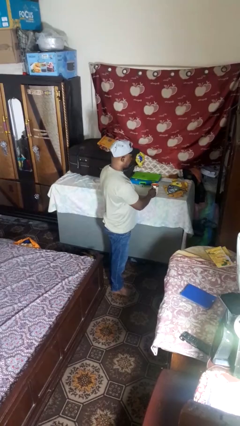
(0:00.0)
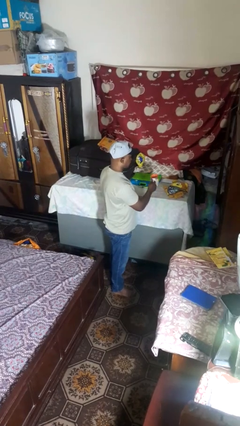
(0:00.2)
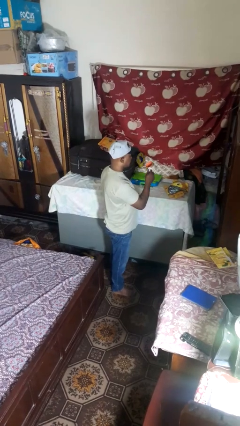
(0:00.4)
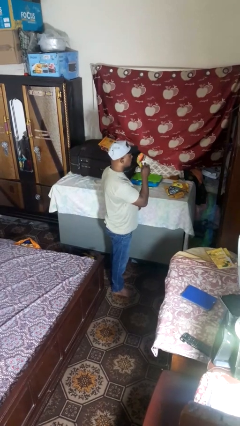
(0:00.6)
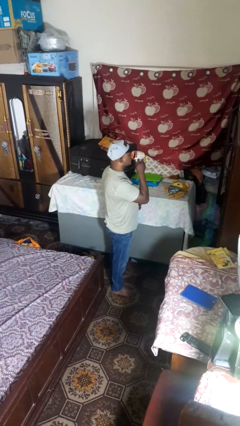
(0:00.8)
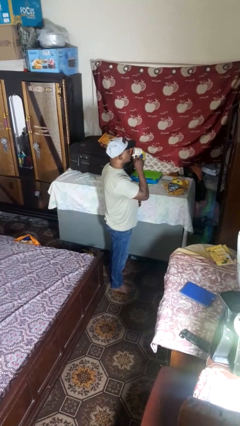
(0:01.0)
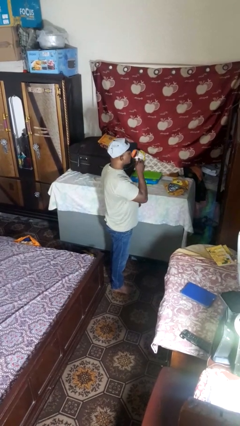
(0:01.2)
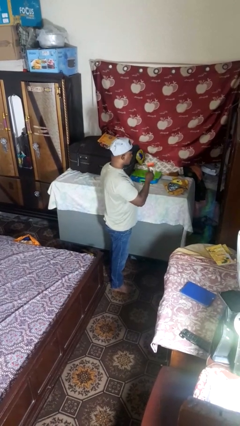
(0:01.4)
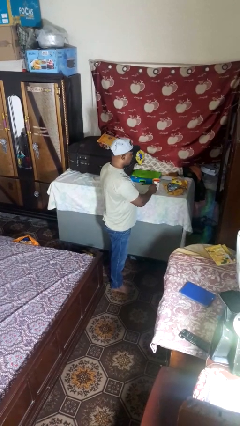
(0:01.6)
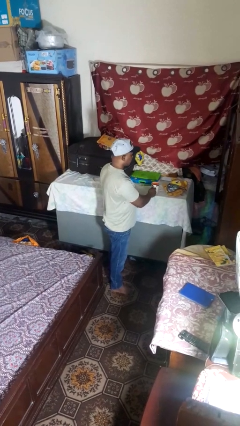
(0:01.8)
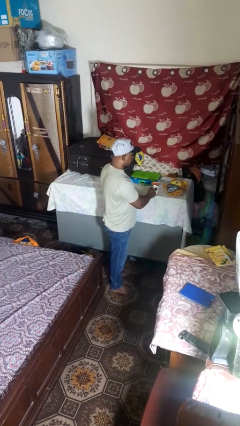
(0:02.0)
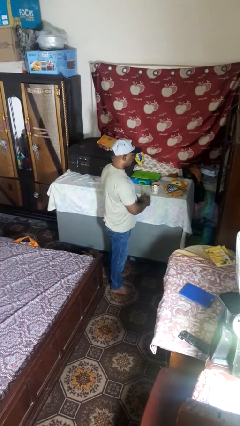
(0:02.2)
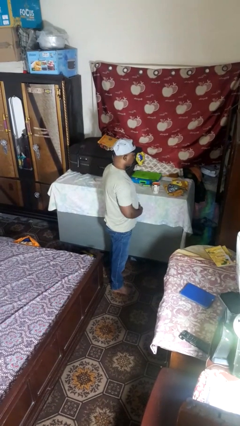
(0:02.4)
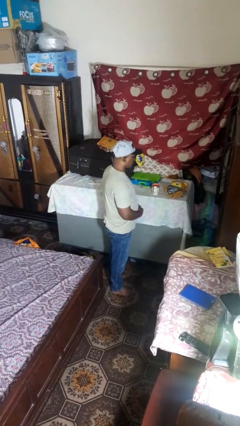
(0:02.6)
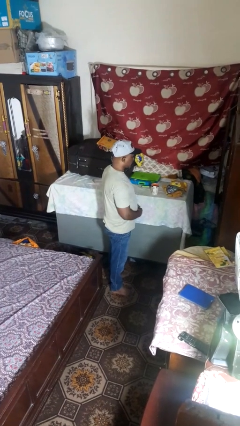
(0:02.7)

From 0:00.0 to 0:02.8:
person drinks from cup

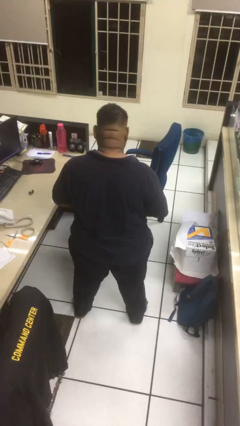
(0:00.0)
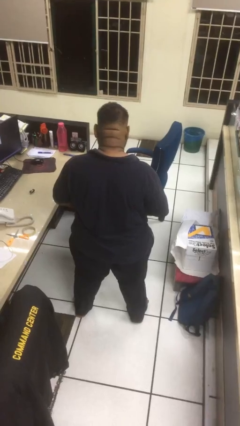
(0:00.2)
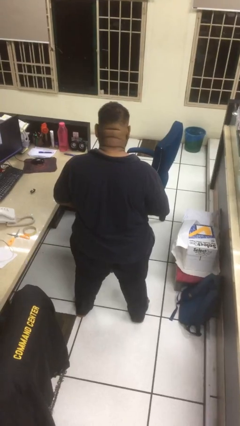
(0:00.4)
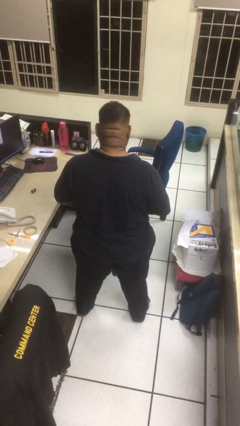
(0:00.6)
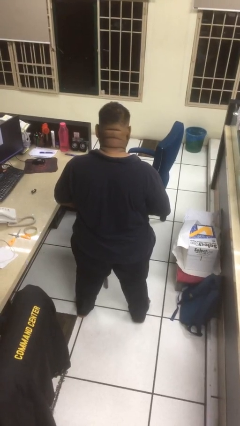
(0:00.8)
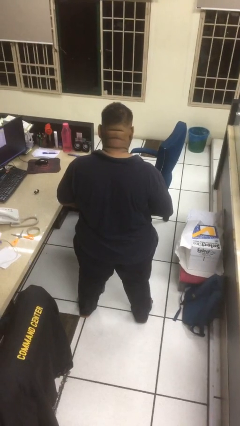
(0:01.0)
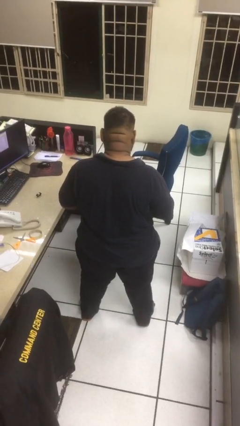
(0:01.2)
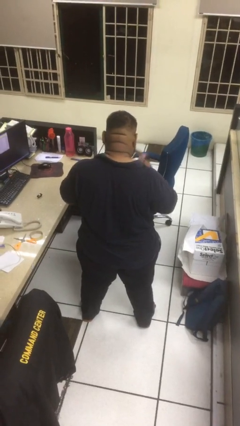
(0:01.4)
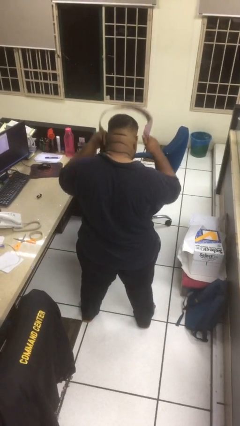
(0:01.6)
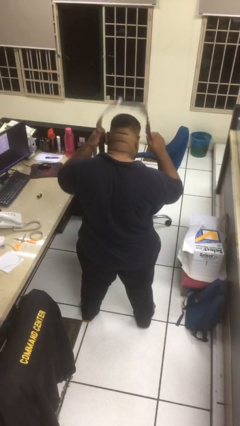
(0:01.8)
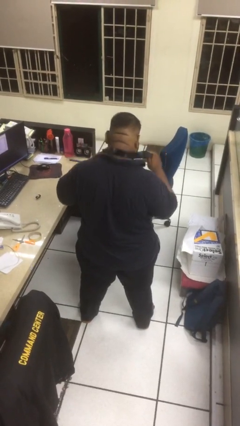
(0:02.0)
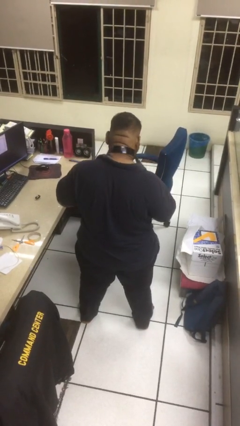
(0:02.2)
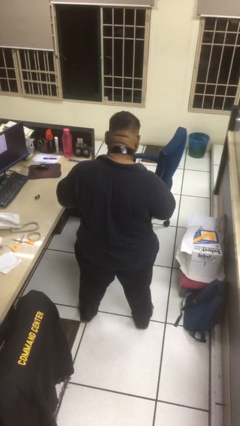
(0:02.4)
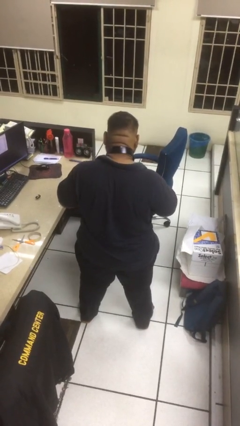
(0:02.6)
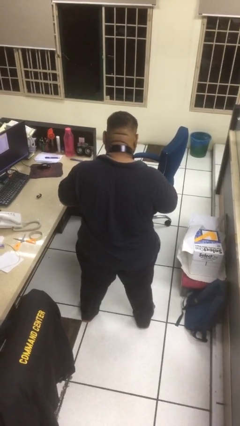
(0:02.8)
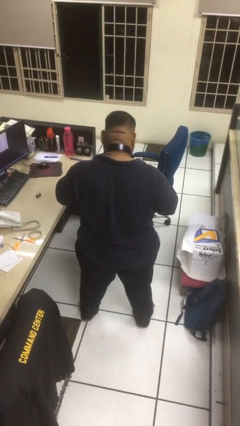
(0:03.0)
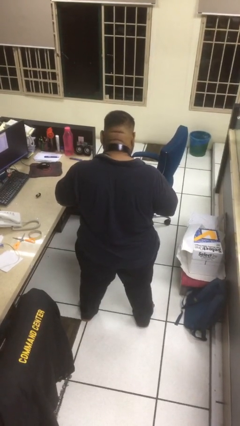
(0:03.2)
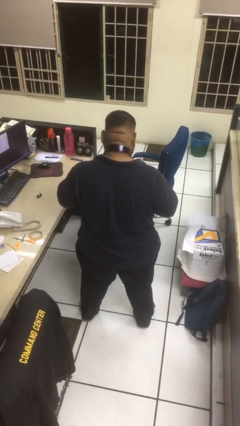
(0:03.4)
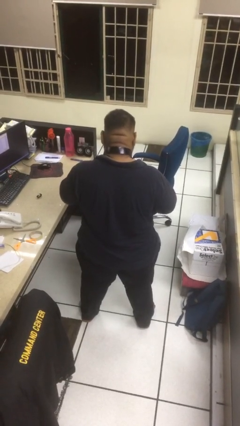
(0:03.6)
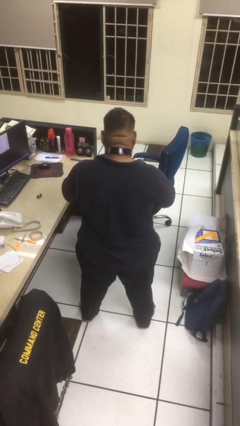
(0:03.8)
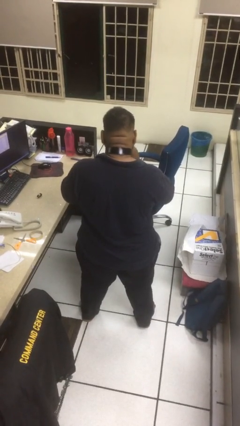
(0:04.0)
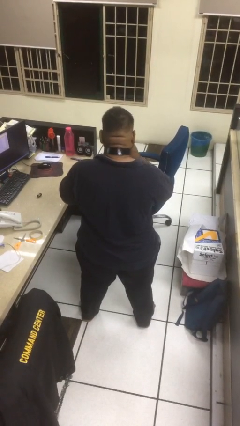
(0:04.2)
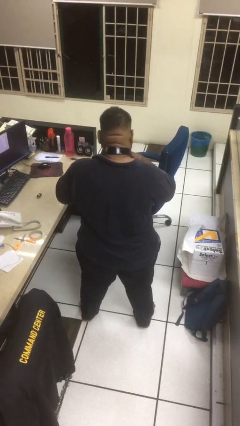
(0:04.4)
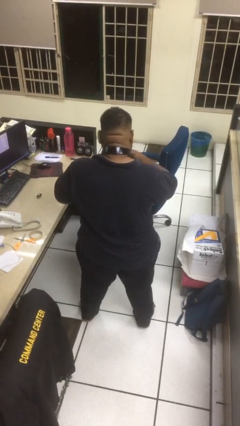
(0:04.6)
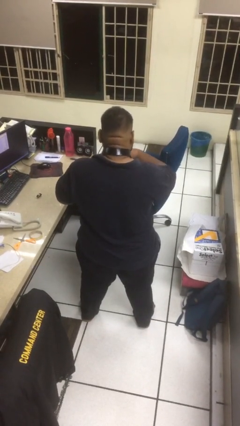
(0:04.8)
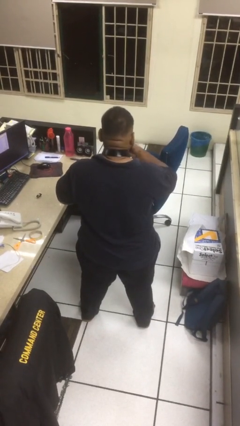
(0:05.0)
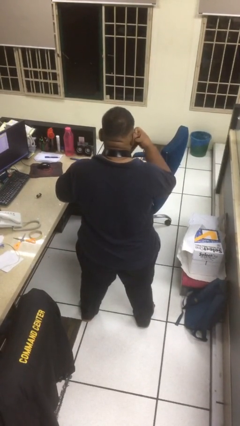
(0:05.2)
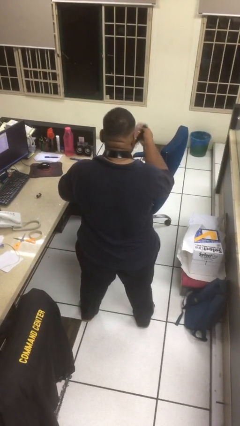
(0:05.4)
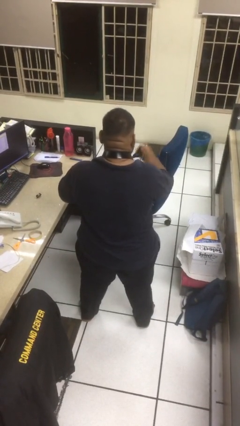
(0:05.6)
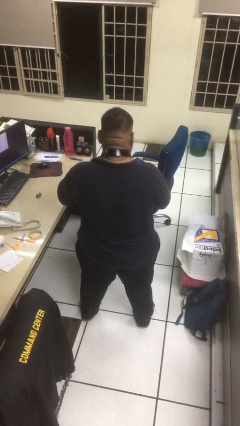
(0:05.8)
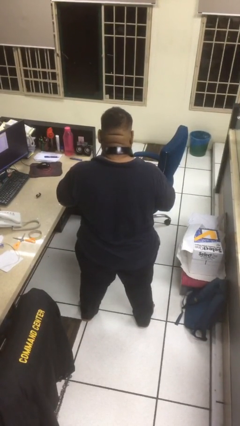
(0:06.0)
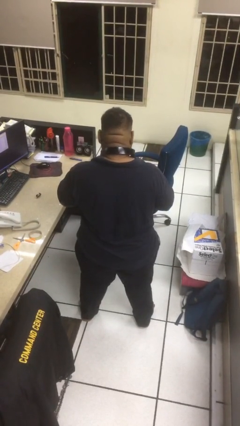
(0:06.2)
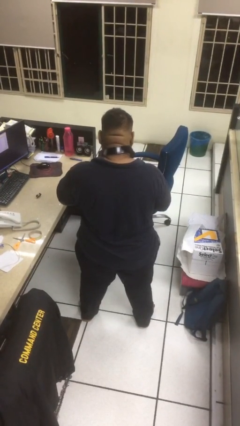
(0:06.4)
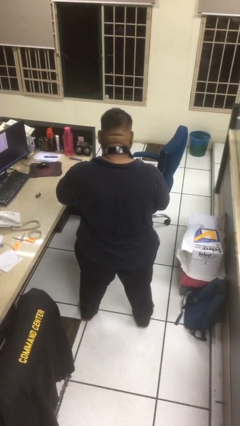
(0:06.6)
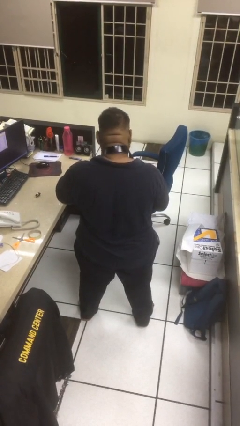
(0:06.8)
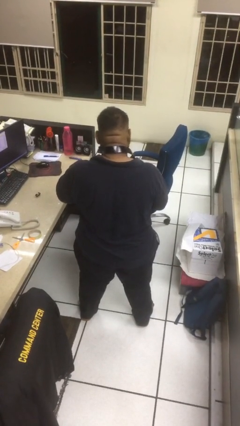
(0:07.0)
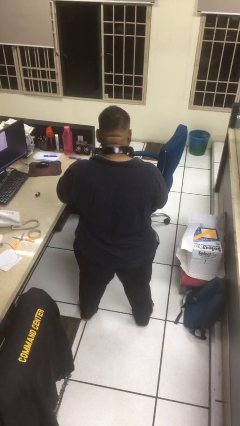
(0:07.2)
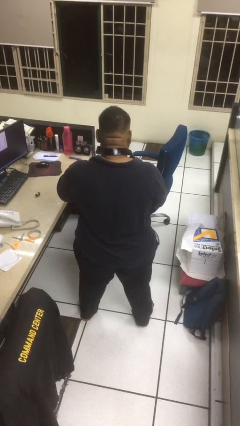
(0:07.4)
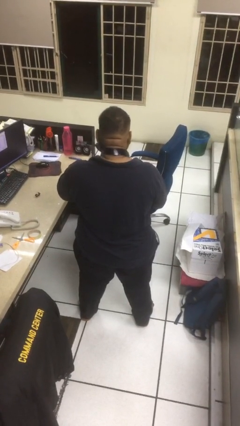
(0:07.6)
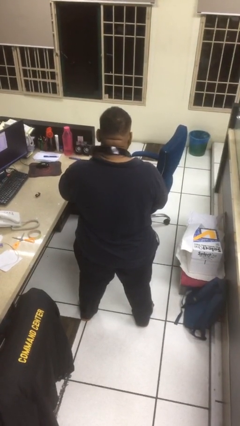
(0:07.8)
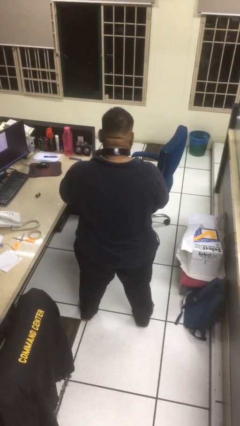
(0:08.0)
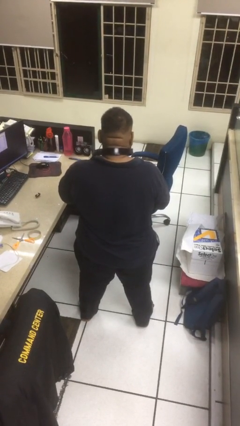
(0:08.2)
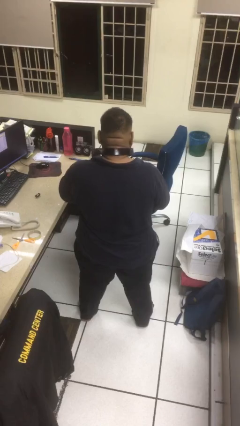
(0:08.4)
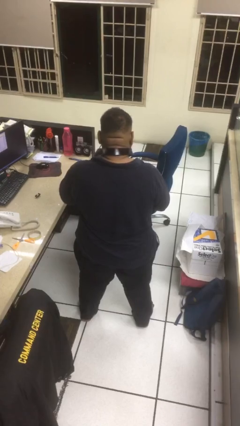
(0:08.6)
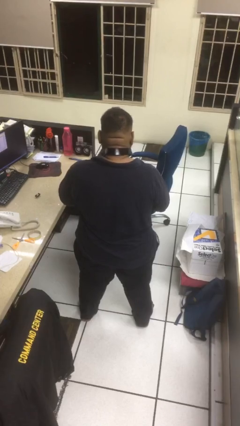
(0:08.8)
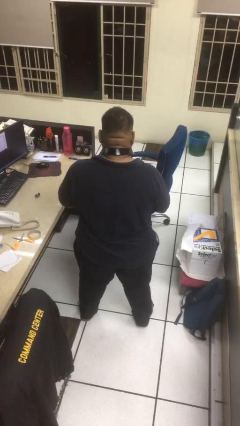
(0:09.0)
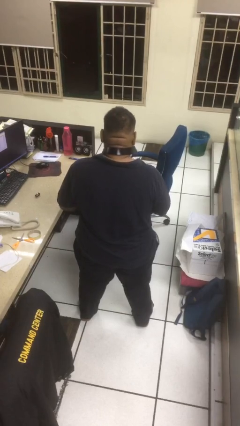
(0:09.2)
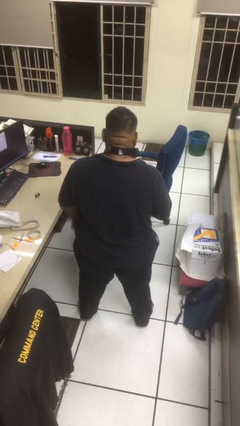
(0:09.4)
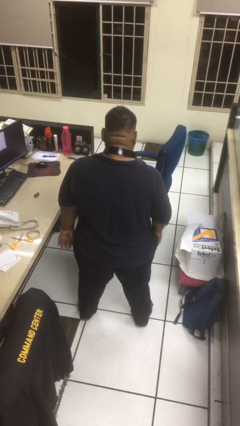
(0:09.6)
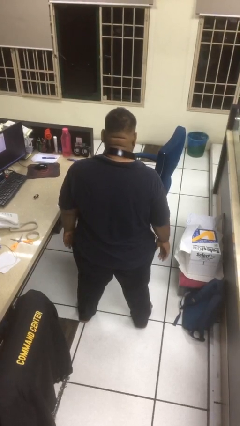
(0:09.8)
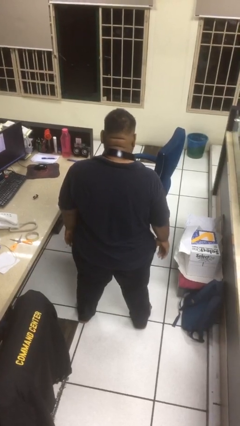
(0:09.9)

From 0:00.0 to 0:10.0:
person puts on necktie

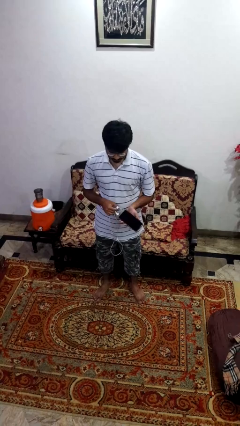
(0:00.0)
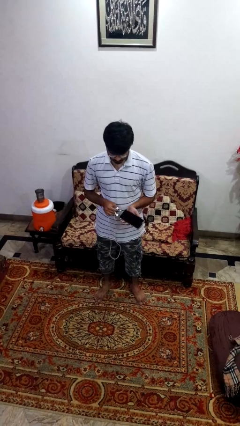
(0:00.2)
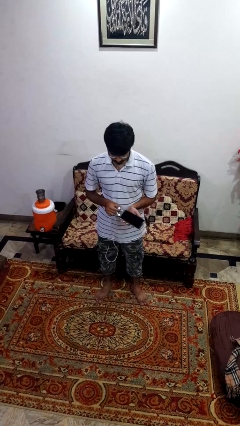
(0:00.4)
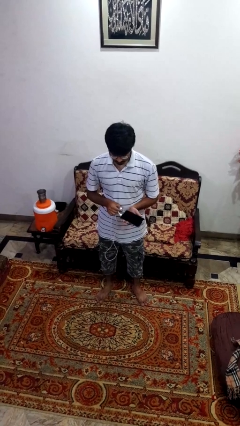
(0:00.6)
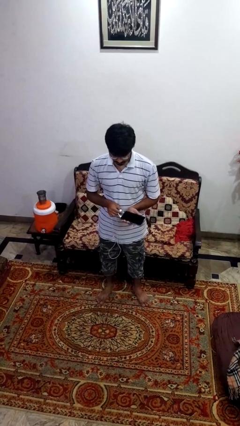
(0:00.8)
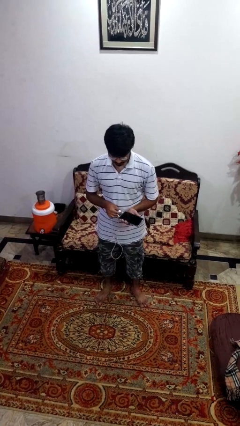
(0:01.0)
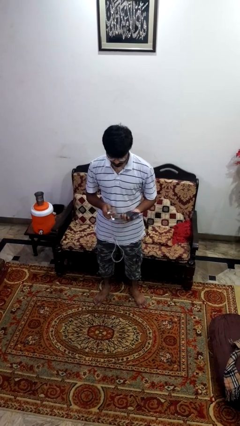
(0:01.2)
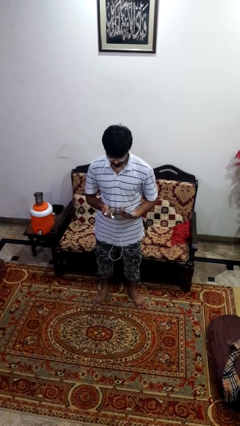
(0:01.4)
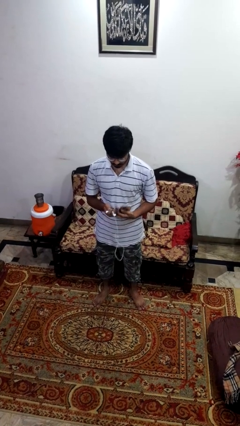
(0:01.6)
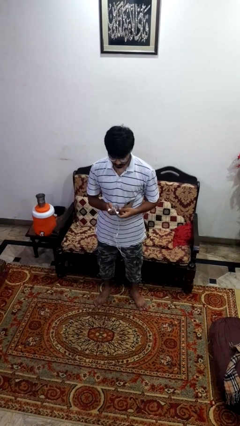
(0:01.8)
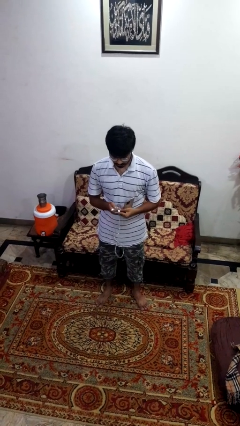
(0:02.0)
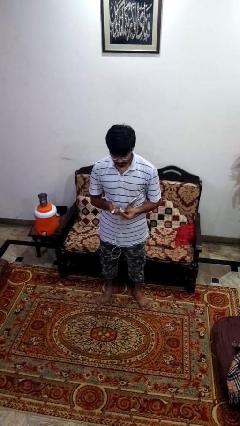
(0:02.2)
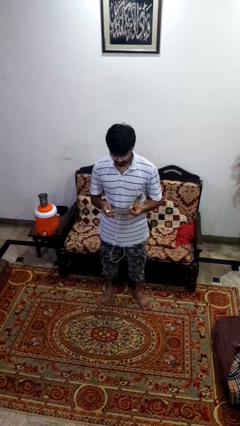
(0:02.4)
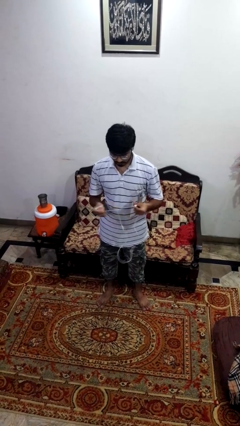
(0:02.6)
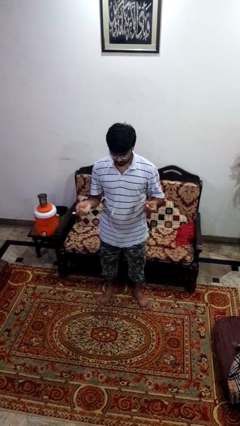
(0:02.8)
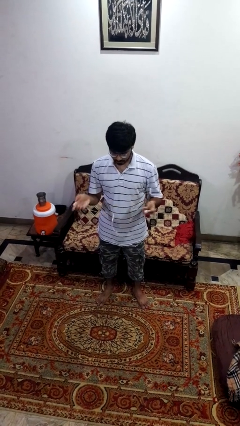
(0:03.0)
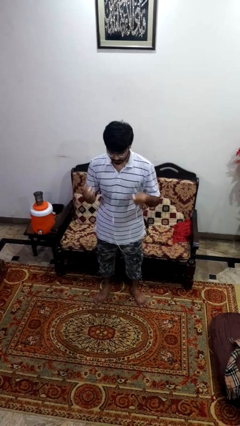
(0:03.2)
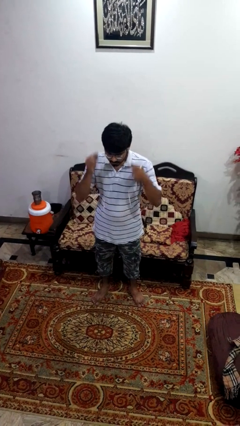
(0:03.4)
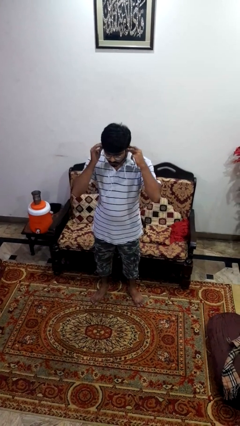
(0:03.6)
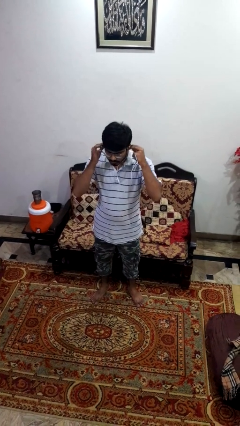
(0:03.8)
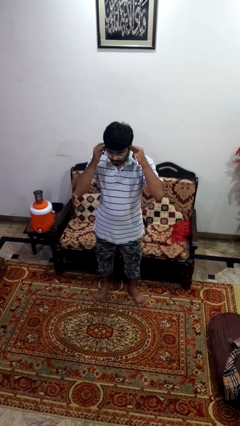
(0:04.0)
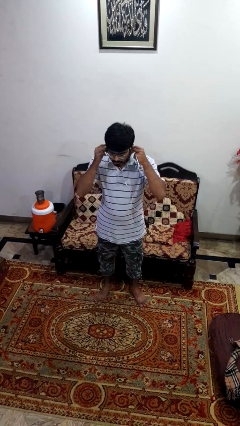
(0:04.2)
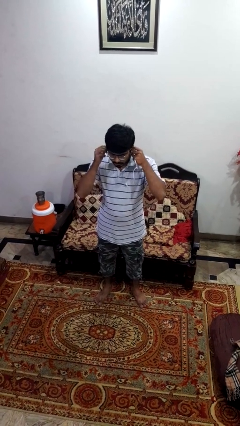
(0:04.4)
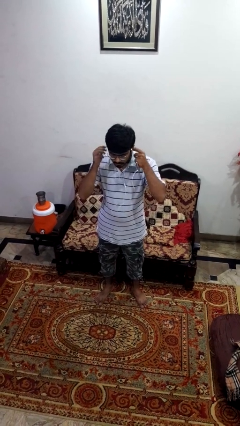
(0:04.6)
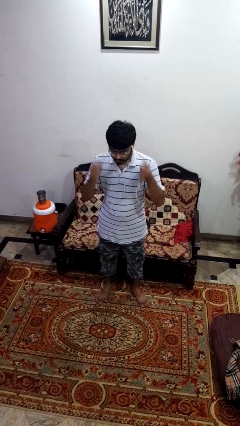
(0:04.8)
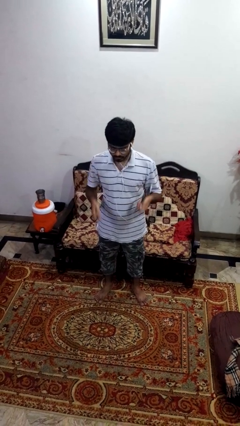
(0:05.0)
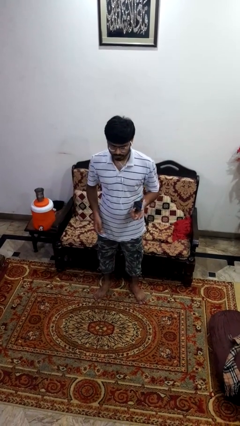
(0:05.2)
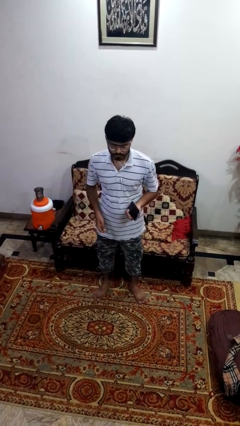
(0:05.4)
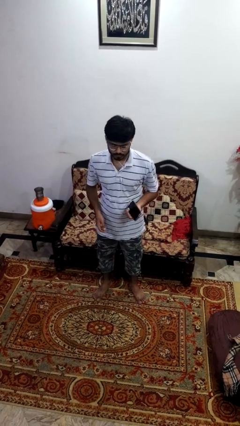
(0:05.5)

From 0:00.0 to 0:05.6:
person puts on headphones
